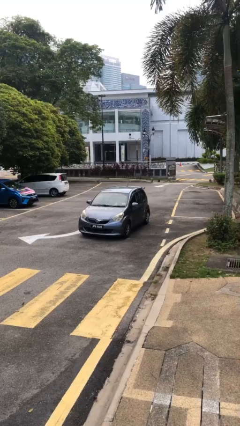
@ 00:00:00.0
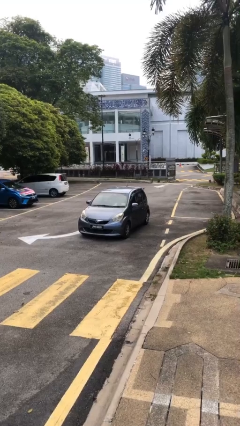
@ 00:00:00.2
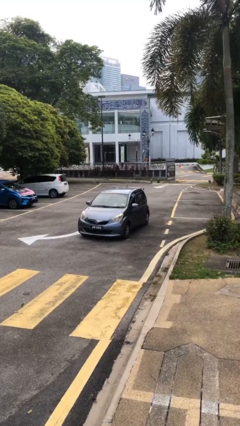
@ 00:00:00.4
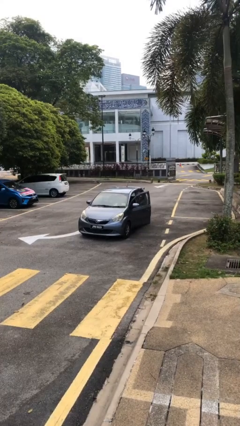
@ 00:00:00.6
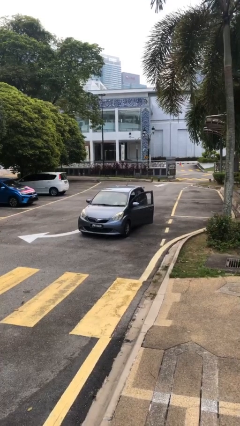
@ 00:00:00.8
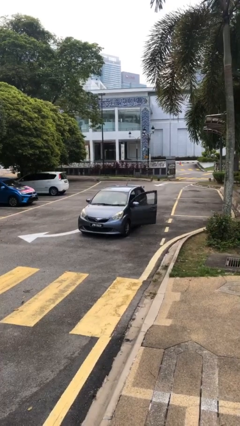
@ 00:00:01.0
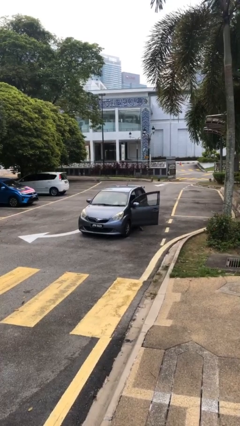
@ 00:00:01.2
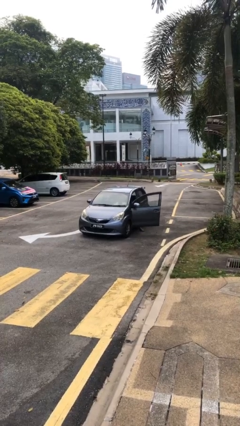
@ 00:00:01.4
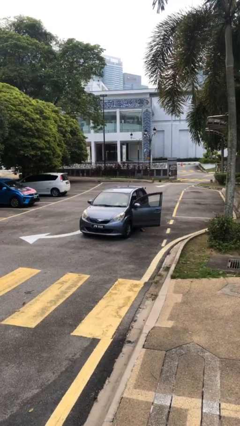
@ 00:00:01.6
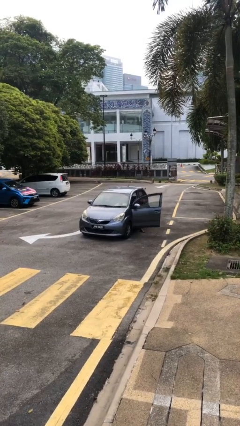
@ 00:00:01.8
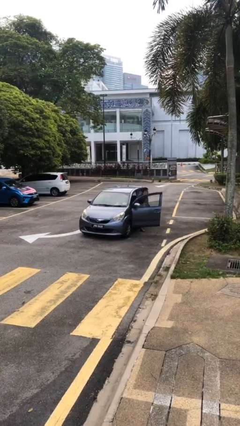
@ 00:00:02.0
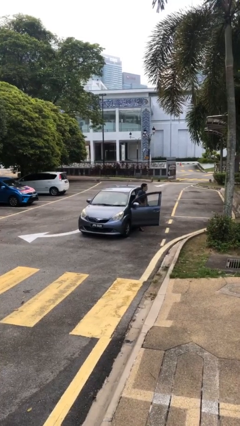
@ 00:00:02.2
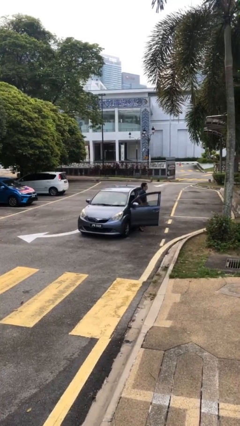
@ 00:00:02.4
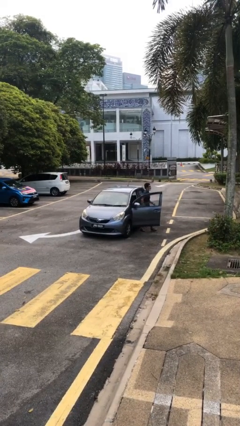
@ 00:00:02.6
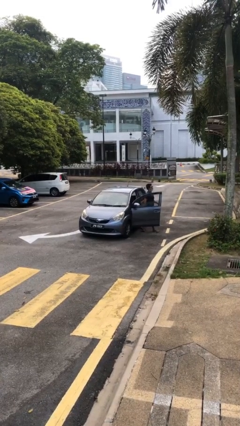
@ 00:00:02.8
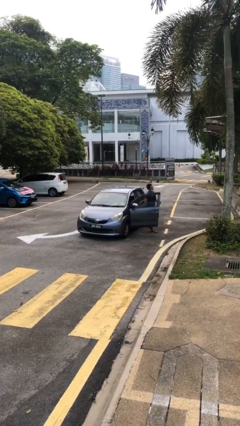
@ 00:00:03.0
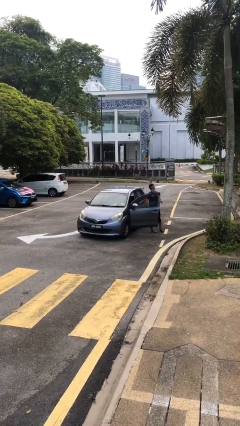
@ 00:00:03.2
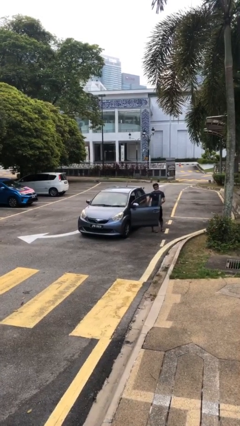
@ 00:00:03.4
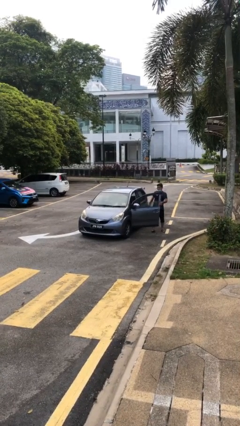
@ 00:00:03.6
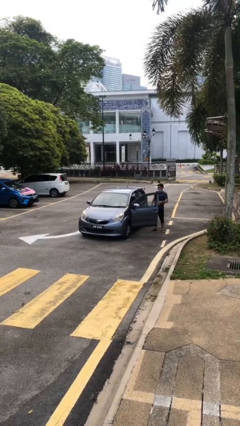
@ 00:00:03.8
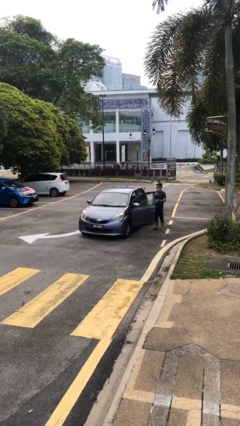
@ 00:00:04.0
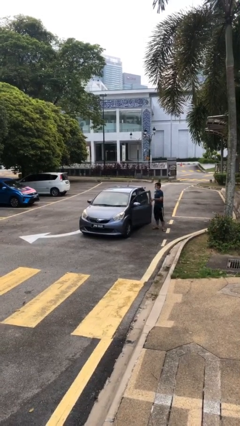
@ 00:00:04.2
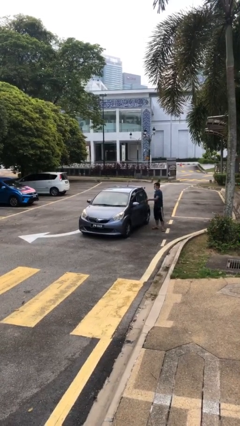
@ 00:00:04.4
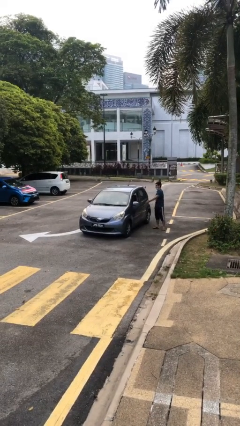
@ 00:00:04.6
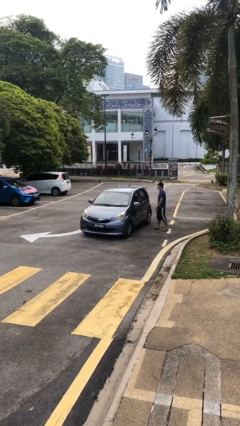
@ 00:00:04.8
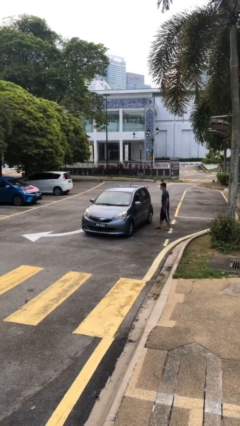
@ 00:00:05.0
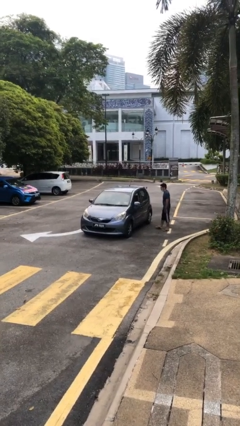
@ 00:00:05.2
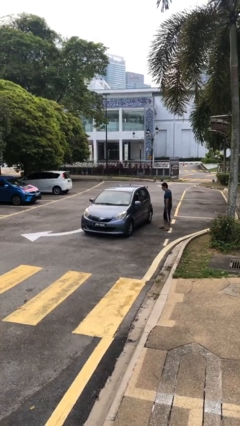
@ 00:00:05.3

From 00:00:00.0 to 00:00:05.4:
car drops off person

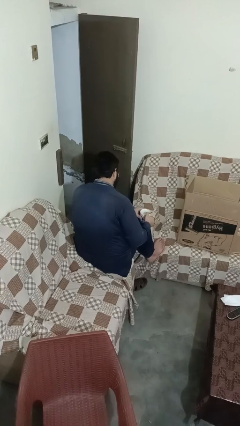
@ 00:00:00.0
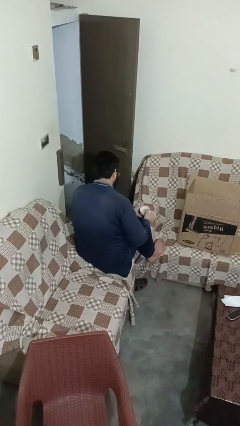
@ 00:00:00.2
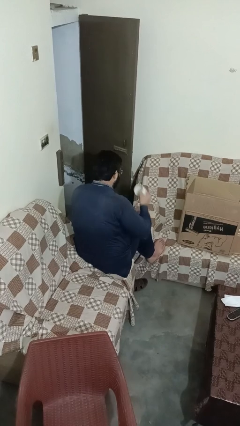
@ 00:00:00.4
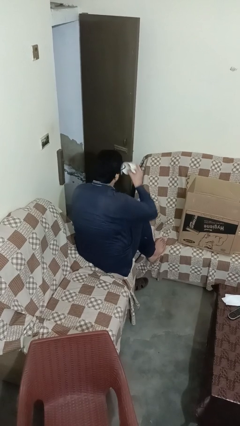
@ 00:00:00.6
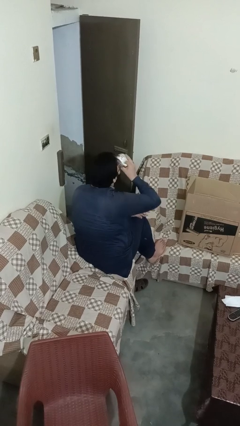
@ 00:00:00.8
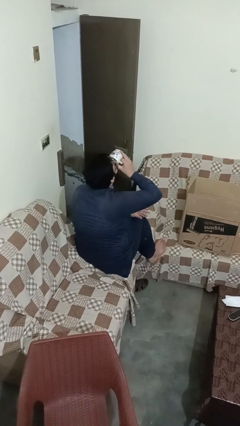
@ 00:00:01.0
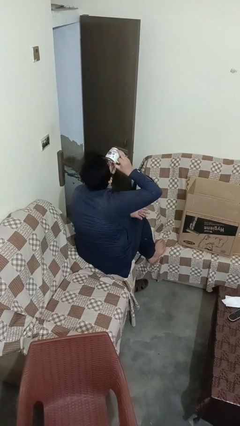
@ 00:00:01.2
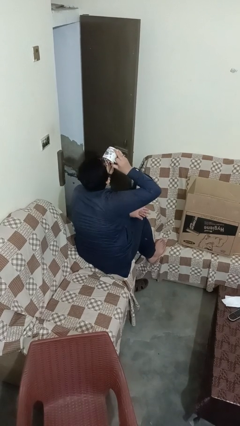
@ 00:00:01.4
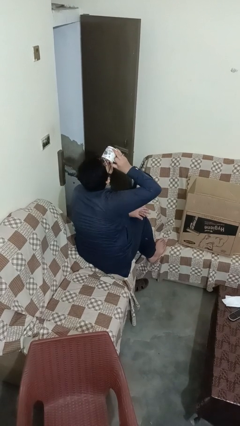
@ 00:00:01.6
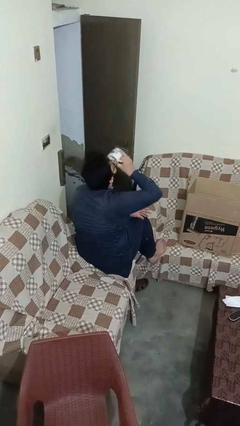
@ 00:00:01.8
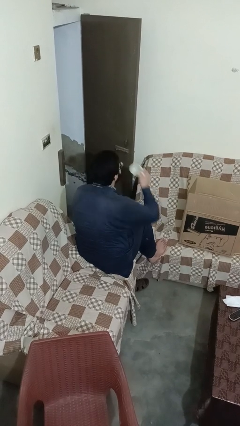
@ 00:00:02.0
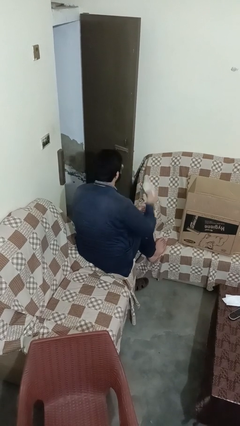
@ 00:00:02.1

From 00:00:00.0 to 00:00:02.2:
person drinks from mug

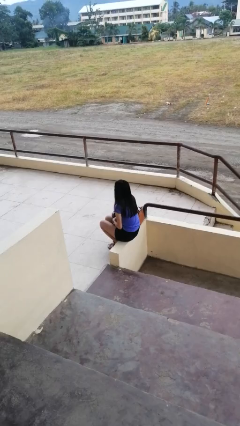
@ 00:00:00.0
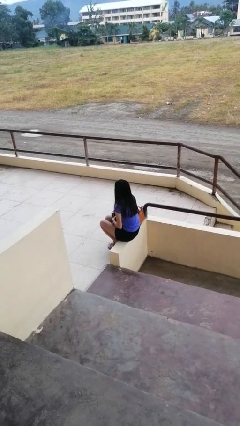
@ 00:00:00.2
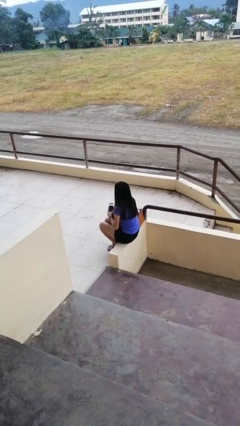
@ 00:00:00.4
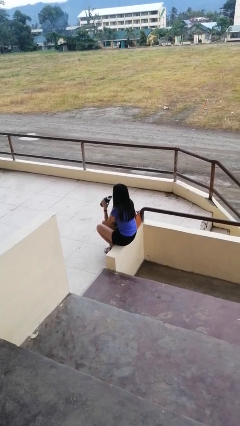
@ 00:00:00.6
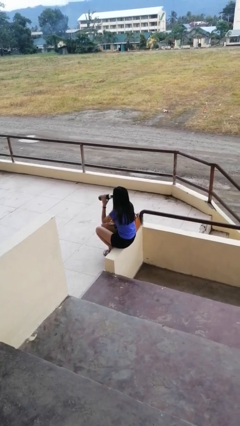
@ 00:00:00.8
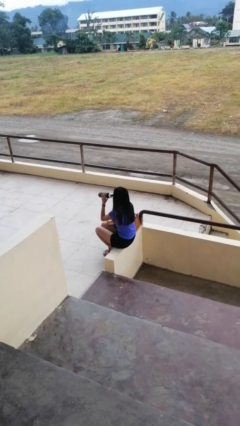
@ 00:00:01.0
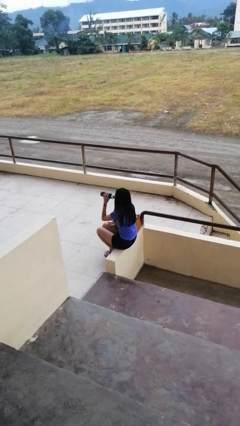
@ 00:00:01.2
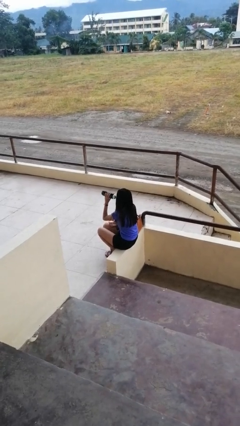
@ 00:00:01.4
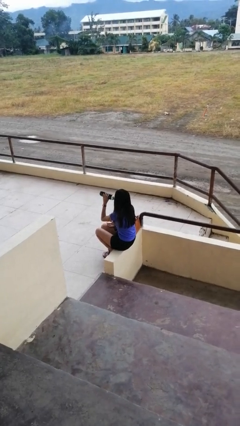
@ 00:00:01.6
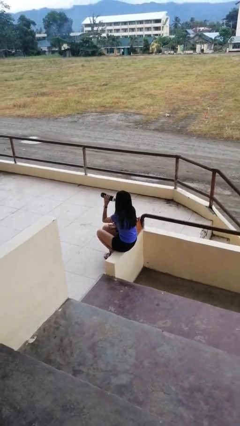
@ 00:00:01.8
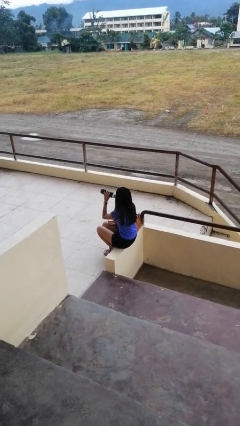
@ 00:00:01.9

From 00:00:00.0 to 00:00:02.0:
person drinks from bottle

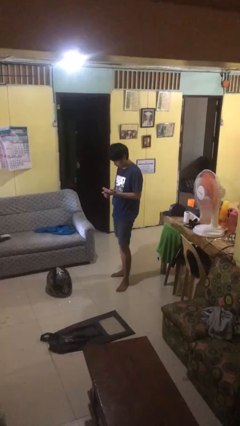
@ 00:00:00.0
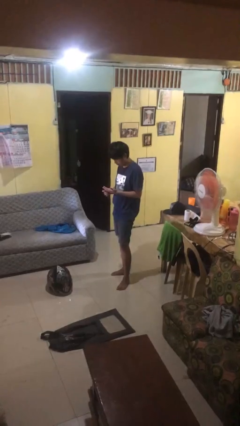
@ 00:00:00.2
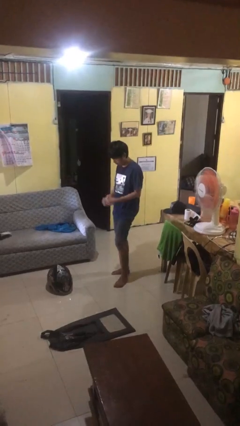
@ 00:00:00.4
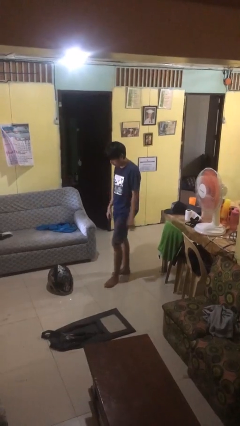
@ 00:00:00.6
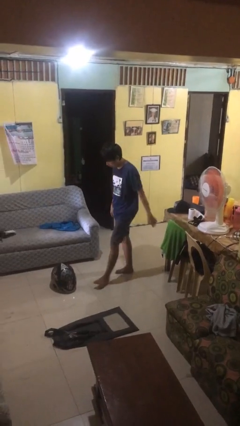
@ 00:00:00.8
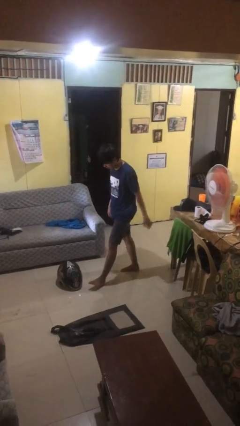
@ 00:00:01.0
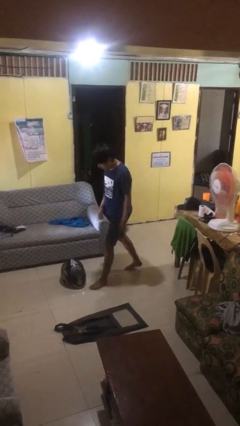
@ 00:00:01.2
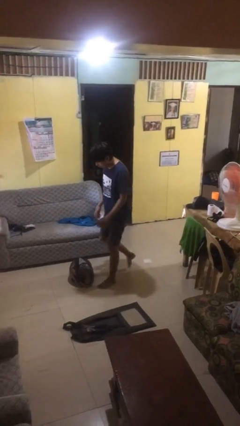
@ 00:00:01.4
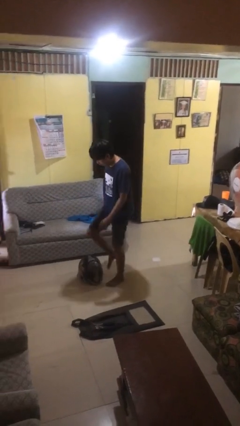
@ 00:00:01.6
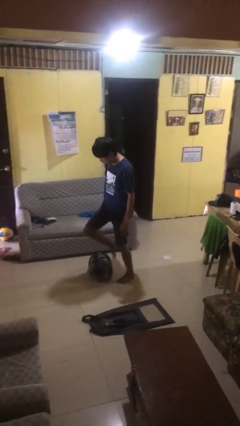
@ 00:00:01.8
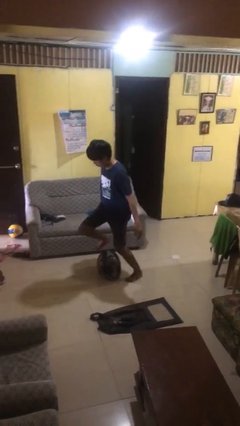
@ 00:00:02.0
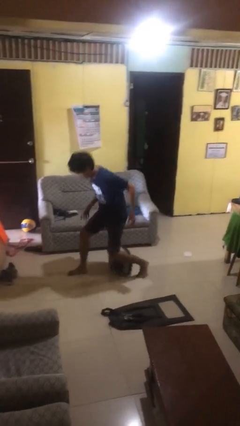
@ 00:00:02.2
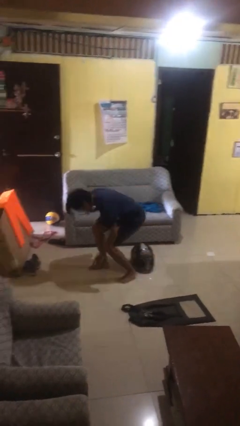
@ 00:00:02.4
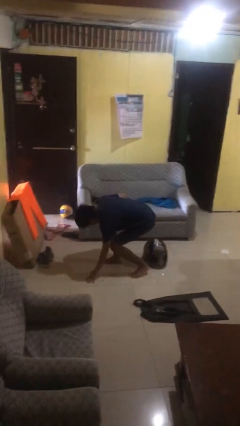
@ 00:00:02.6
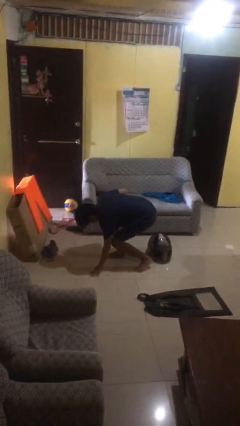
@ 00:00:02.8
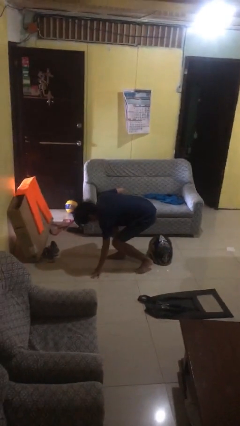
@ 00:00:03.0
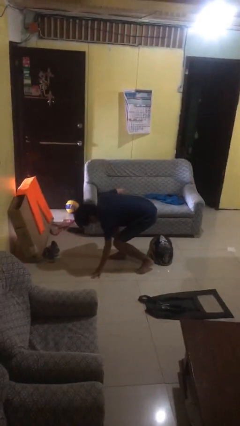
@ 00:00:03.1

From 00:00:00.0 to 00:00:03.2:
person trips on object on floor

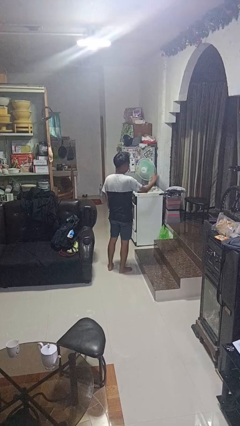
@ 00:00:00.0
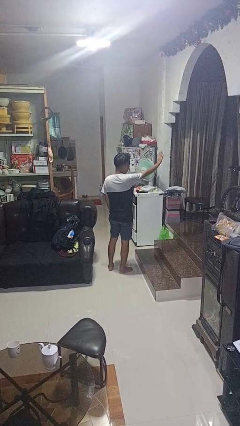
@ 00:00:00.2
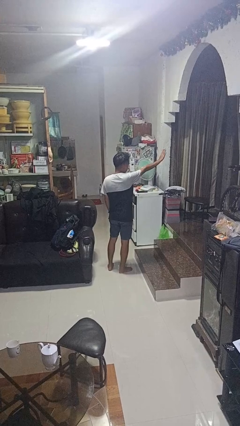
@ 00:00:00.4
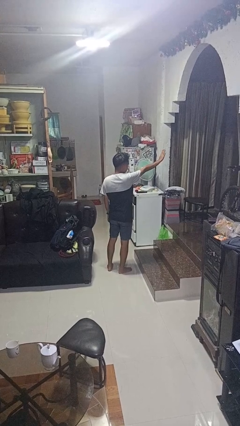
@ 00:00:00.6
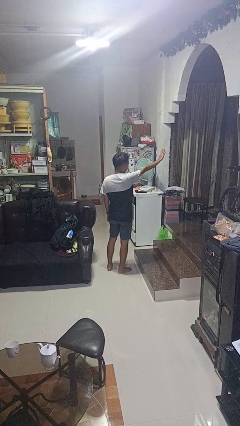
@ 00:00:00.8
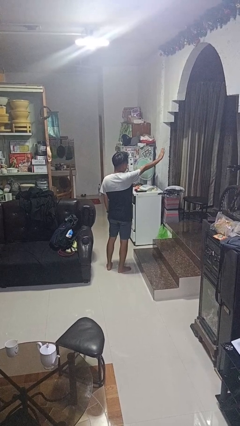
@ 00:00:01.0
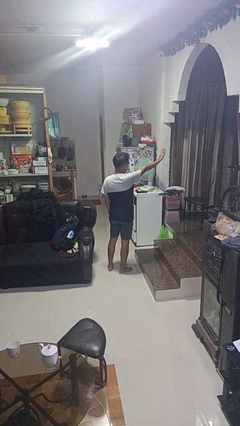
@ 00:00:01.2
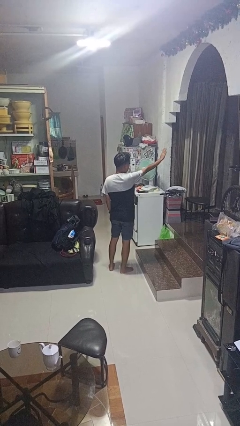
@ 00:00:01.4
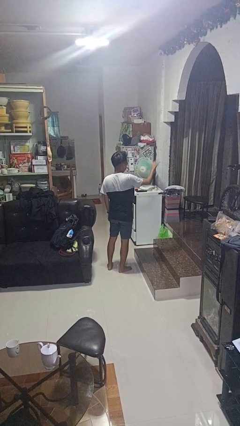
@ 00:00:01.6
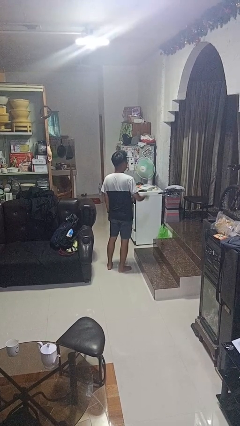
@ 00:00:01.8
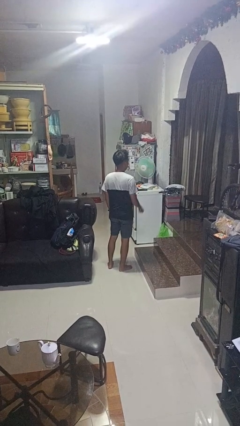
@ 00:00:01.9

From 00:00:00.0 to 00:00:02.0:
person gestures stop

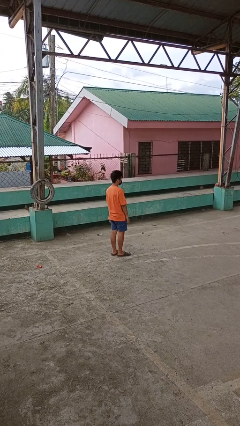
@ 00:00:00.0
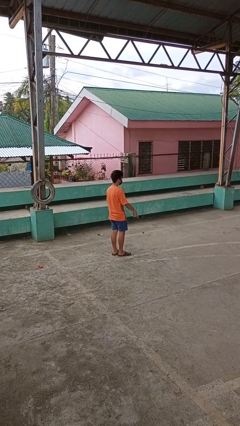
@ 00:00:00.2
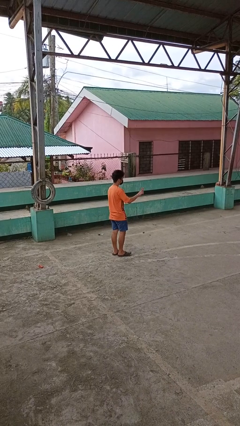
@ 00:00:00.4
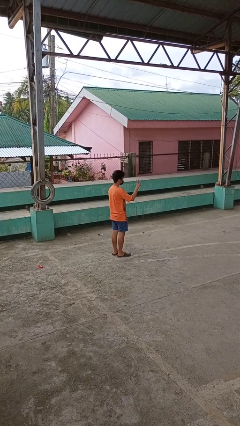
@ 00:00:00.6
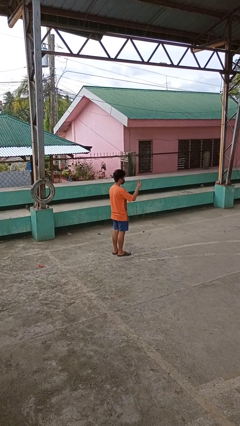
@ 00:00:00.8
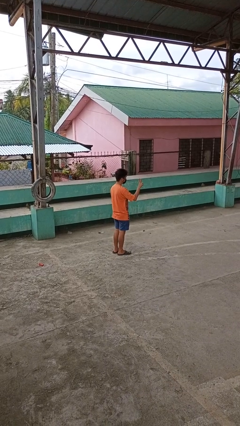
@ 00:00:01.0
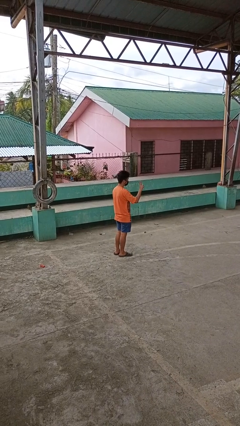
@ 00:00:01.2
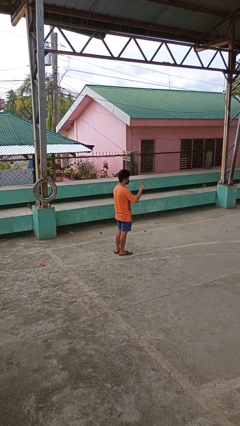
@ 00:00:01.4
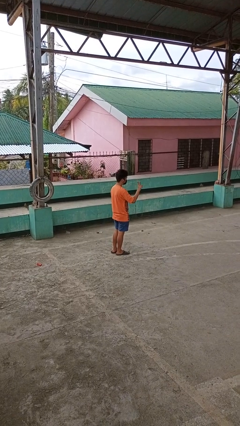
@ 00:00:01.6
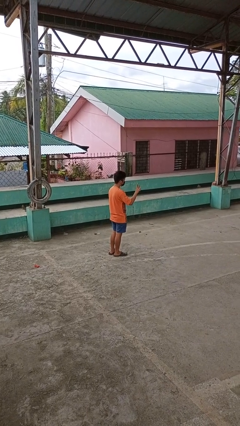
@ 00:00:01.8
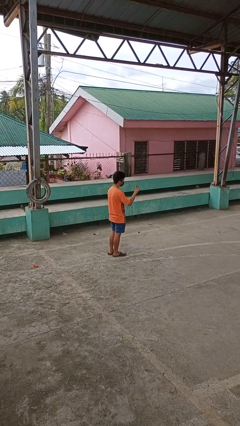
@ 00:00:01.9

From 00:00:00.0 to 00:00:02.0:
person gestures peace

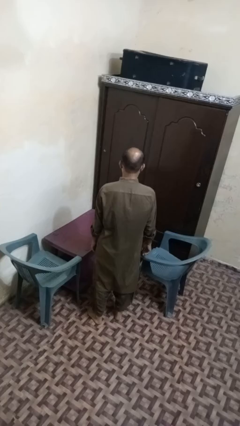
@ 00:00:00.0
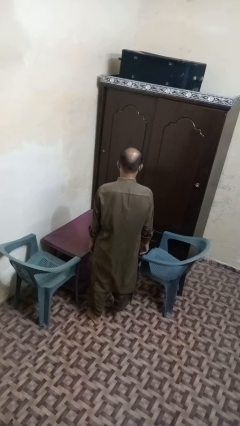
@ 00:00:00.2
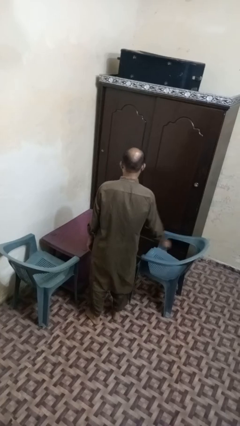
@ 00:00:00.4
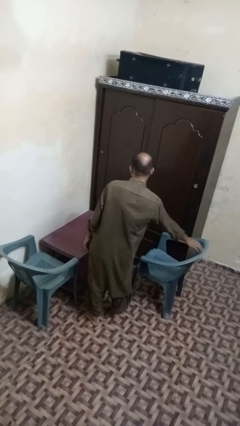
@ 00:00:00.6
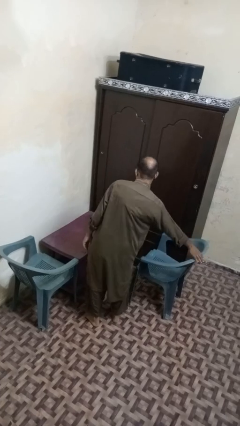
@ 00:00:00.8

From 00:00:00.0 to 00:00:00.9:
person pushes in chair
